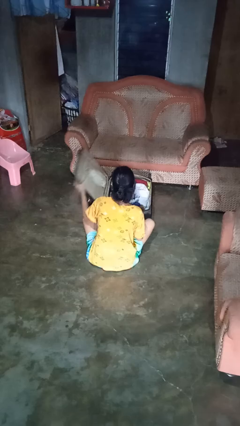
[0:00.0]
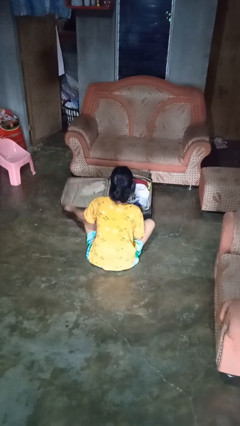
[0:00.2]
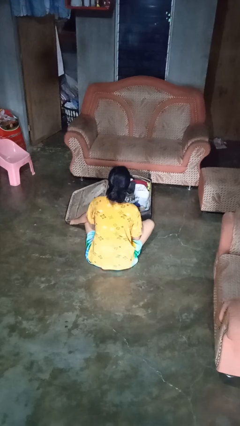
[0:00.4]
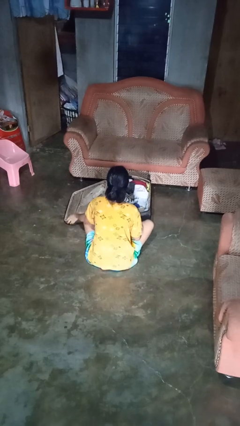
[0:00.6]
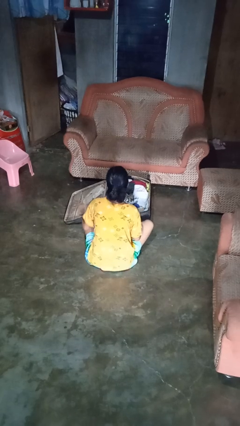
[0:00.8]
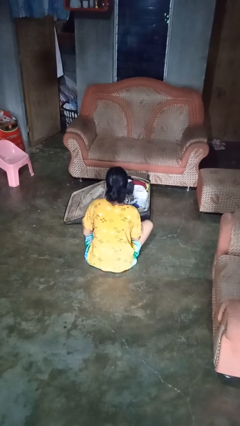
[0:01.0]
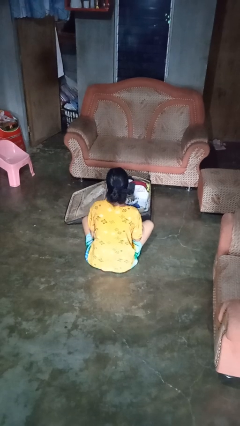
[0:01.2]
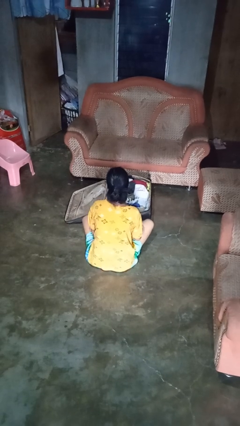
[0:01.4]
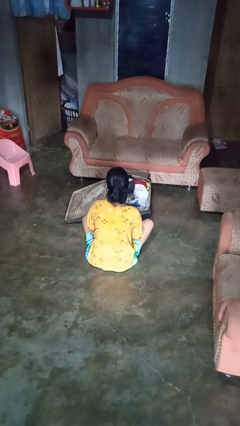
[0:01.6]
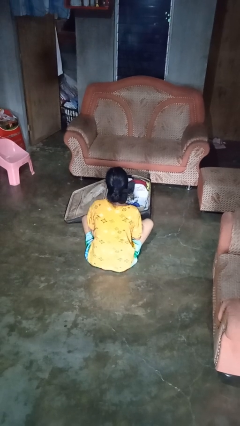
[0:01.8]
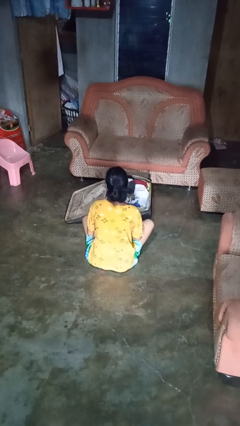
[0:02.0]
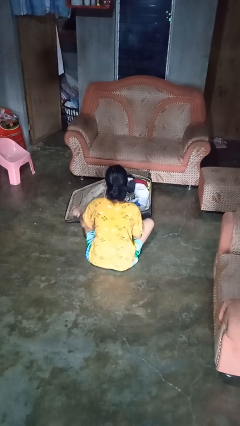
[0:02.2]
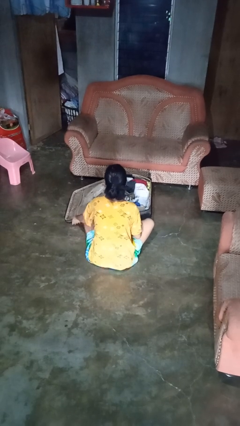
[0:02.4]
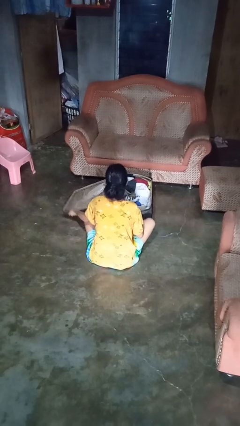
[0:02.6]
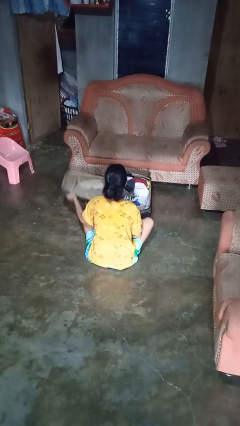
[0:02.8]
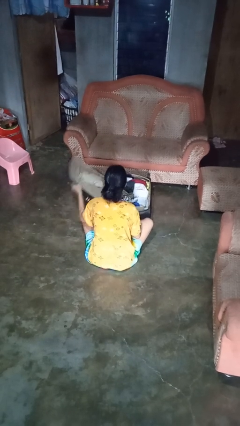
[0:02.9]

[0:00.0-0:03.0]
person opens suitcase

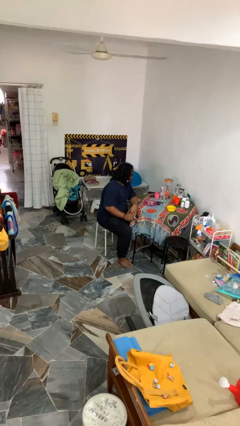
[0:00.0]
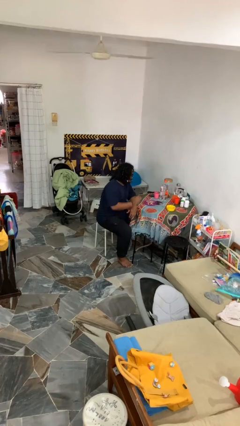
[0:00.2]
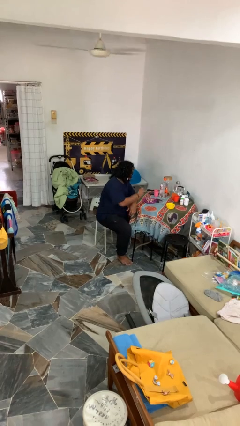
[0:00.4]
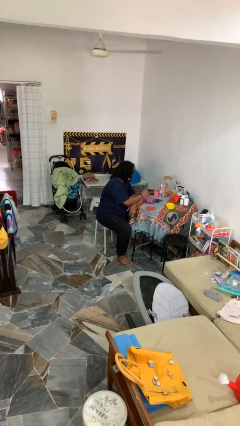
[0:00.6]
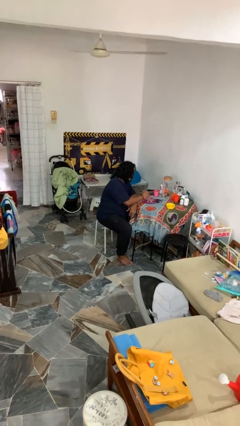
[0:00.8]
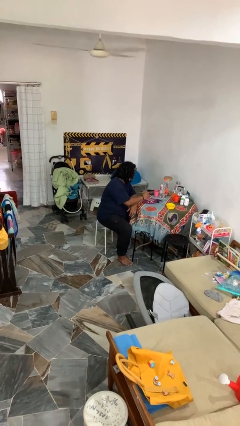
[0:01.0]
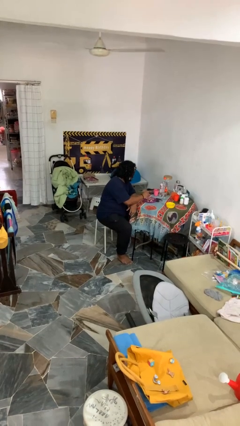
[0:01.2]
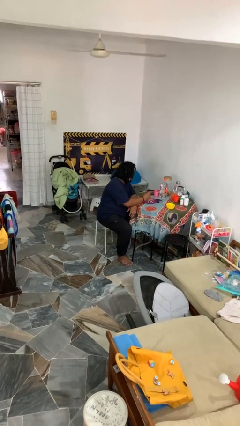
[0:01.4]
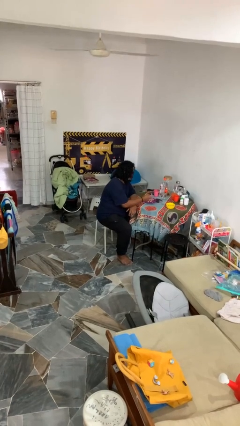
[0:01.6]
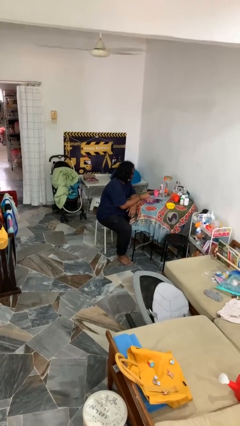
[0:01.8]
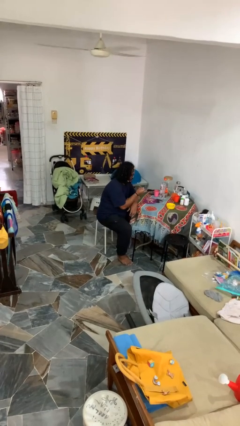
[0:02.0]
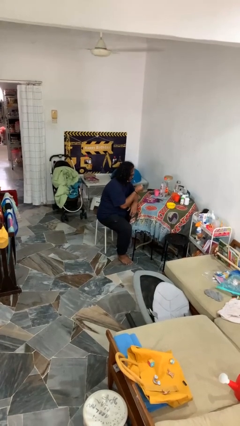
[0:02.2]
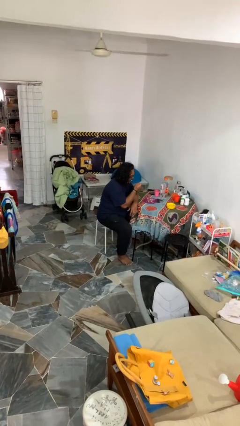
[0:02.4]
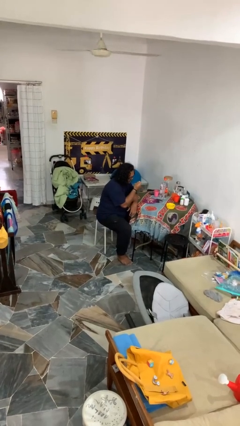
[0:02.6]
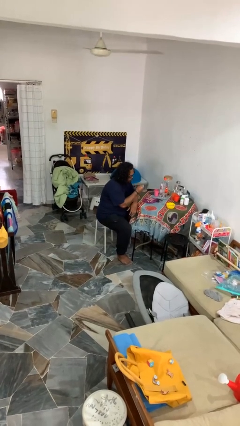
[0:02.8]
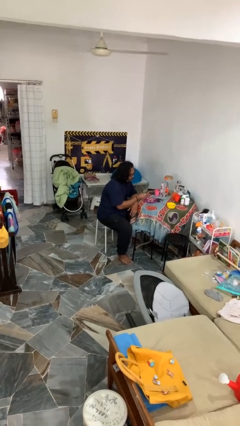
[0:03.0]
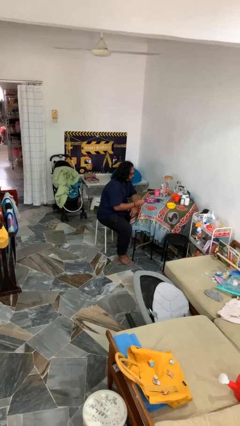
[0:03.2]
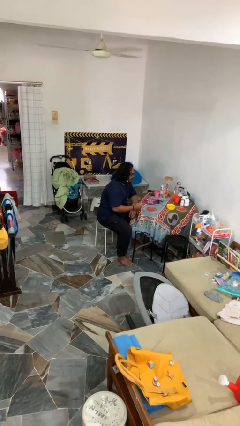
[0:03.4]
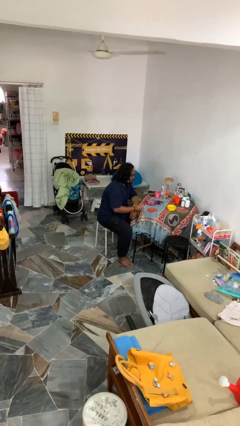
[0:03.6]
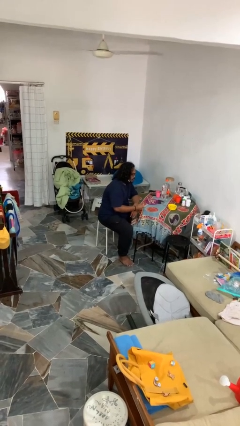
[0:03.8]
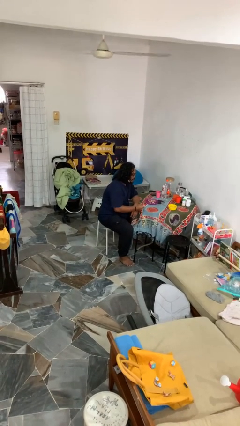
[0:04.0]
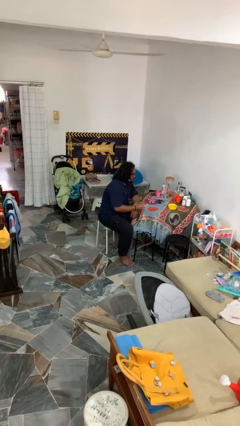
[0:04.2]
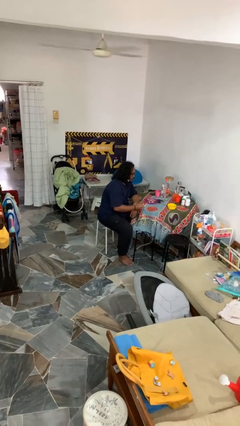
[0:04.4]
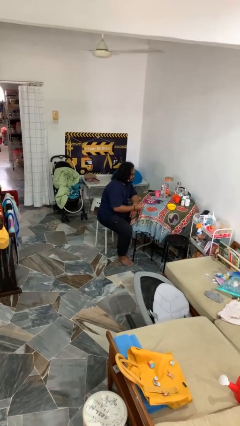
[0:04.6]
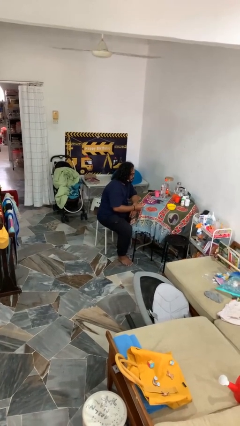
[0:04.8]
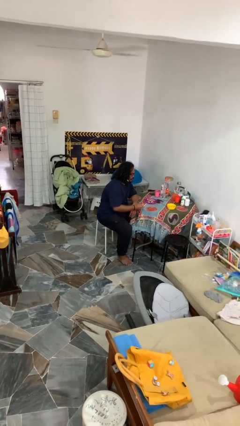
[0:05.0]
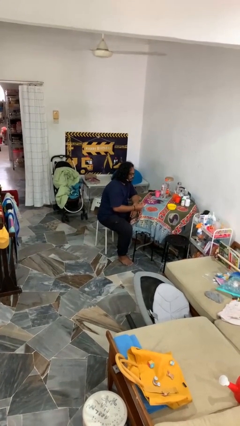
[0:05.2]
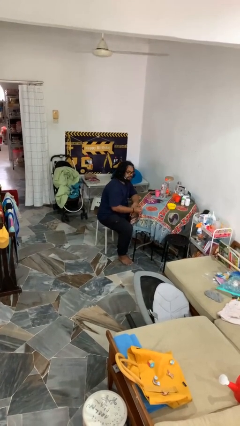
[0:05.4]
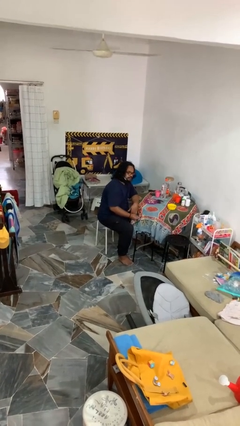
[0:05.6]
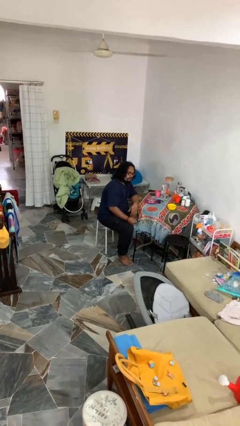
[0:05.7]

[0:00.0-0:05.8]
person eats with utensil

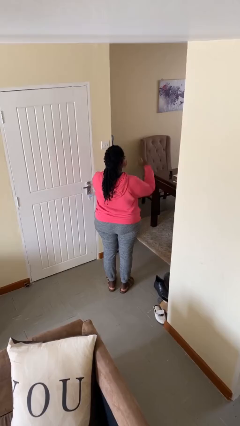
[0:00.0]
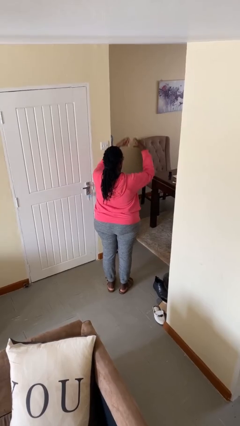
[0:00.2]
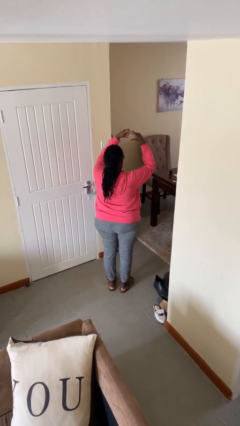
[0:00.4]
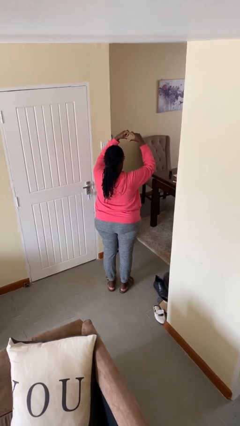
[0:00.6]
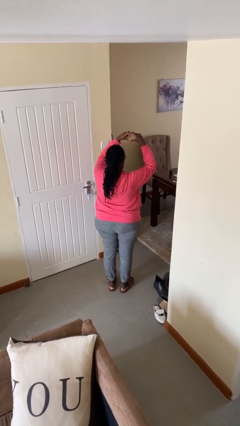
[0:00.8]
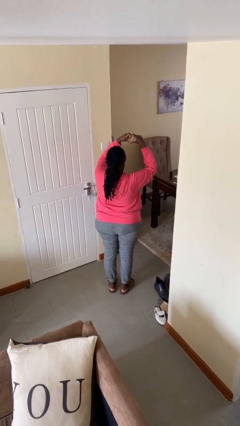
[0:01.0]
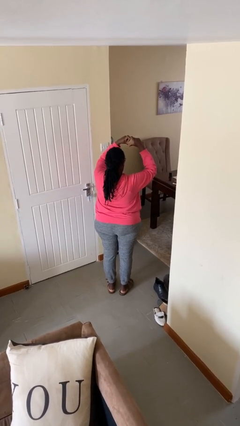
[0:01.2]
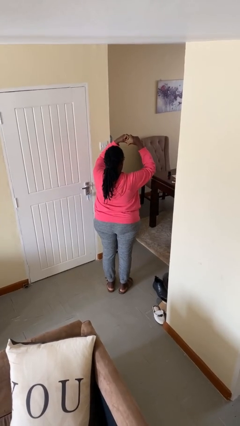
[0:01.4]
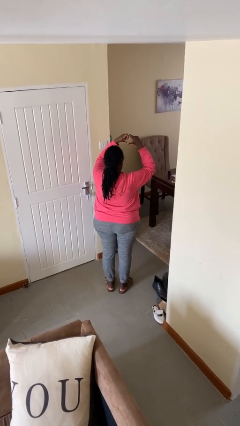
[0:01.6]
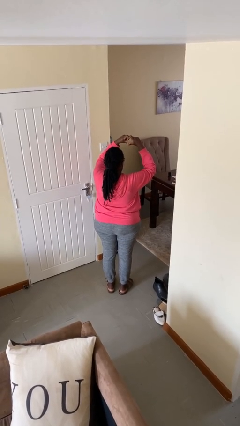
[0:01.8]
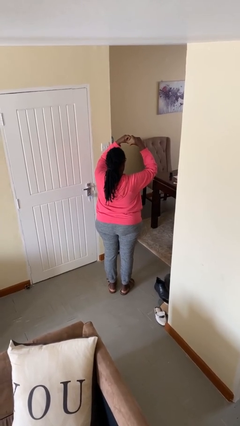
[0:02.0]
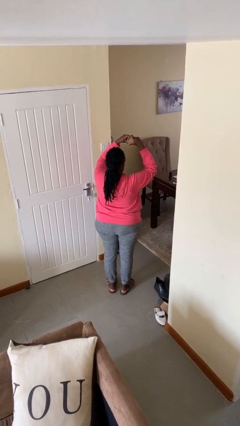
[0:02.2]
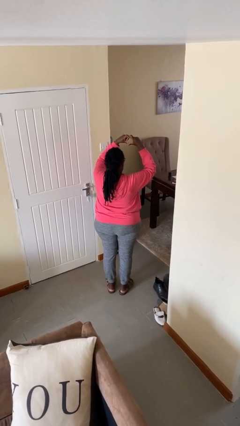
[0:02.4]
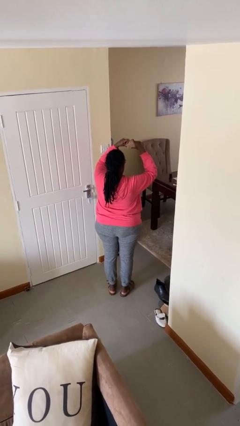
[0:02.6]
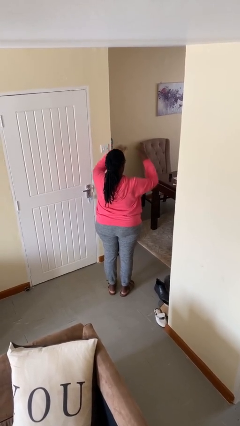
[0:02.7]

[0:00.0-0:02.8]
person gestures heart

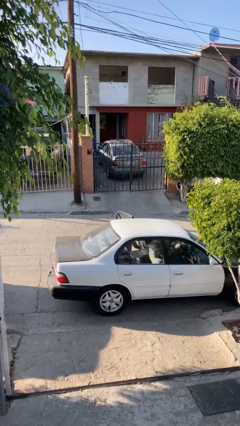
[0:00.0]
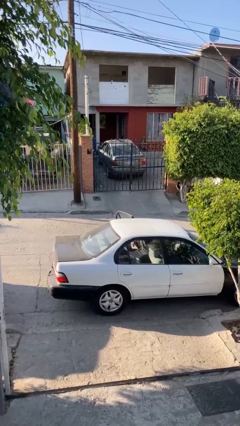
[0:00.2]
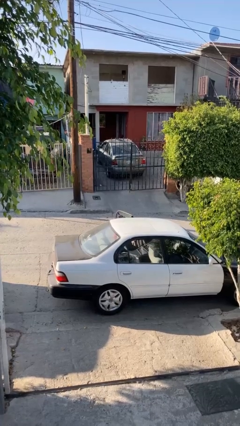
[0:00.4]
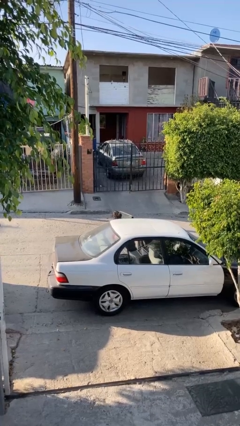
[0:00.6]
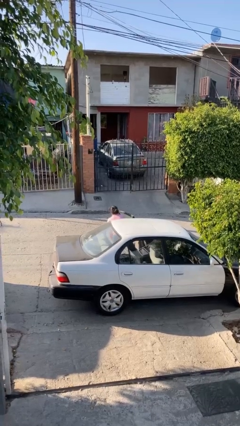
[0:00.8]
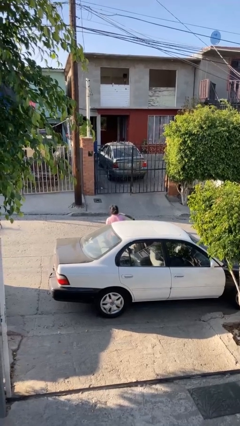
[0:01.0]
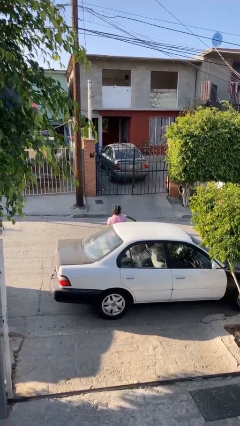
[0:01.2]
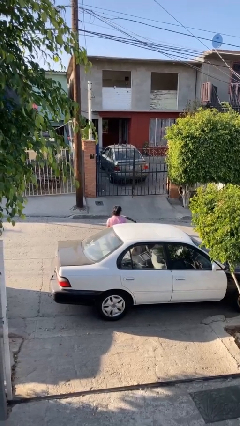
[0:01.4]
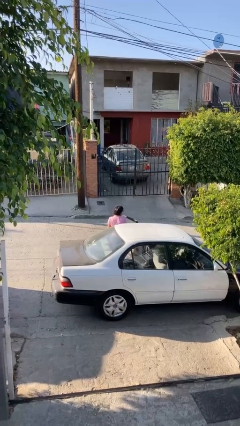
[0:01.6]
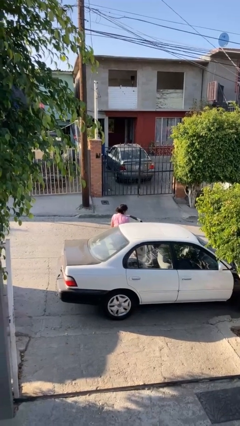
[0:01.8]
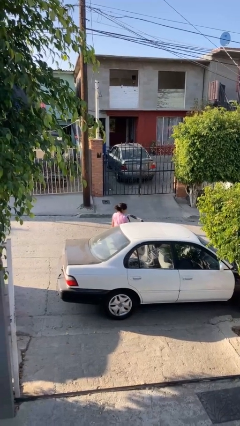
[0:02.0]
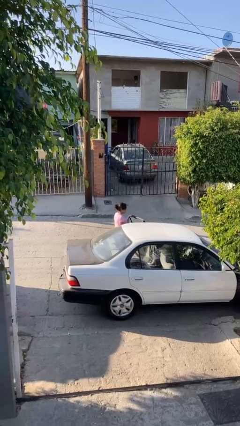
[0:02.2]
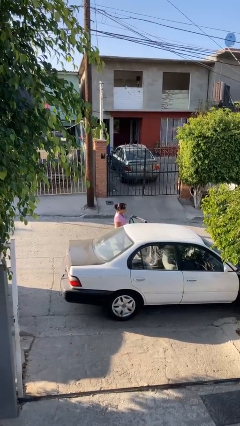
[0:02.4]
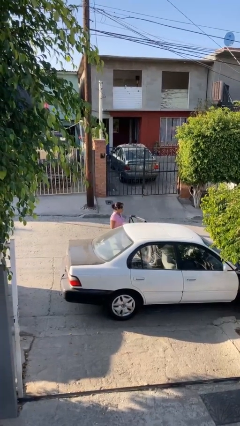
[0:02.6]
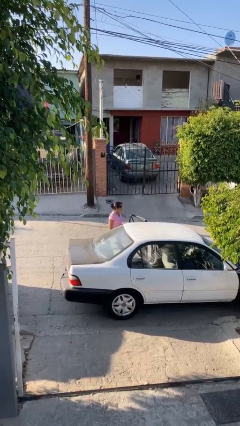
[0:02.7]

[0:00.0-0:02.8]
person exits car

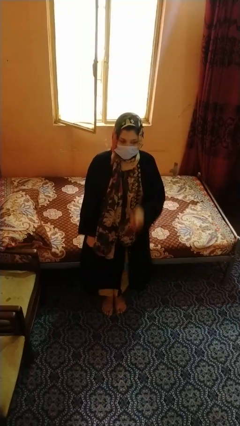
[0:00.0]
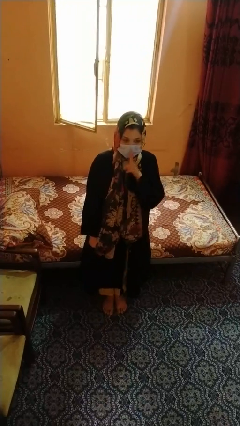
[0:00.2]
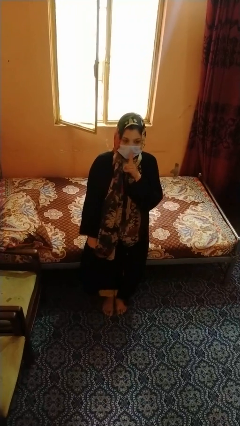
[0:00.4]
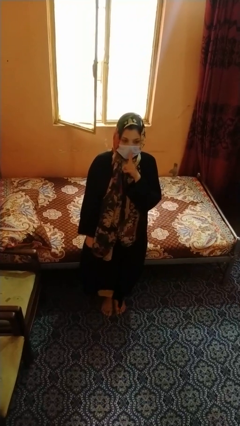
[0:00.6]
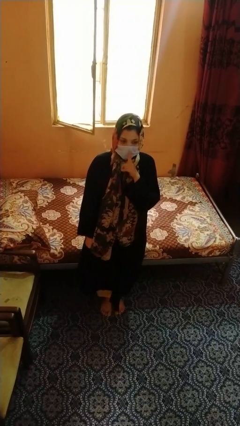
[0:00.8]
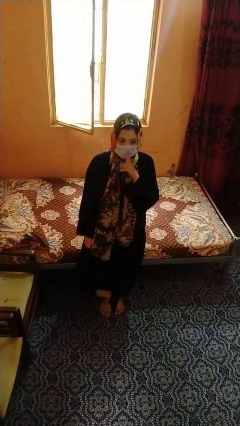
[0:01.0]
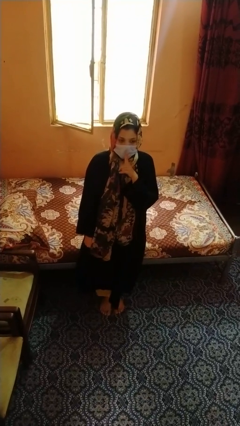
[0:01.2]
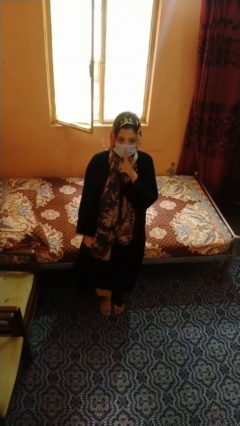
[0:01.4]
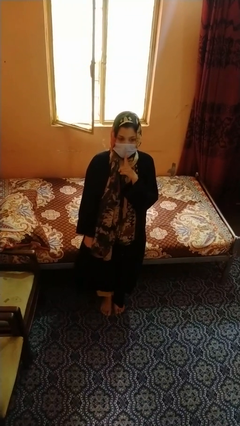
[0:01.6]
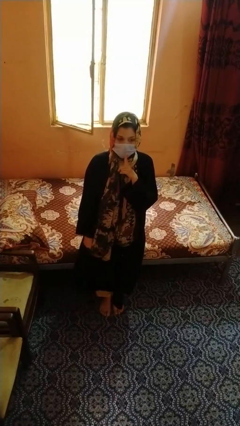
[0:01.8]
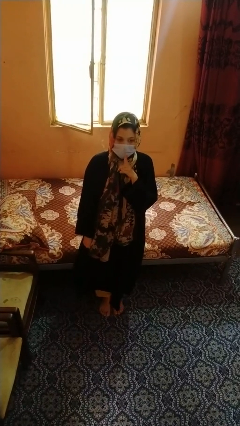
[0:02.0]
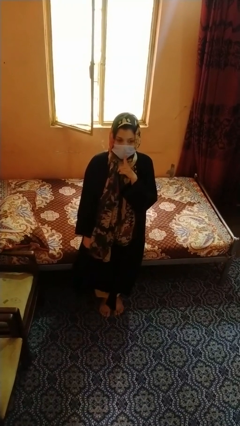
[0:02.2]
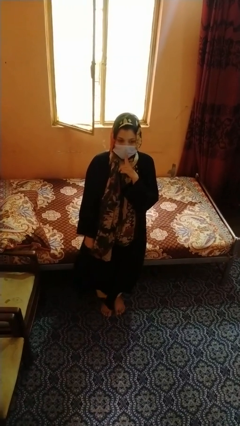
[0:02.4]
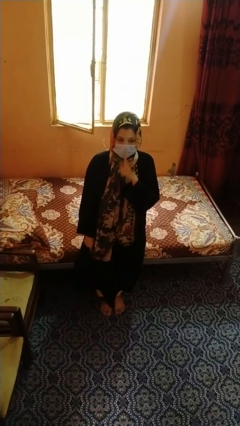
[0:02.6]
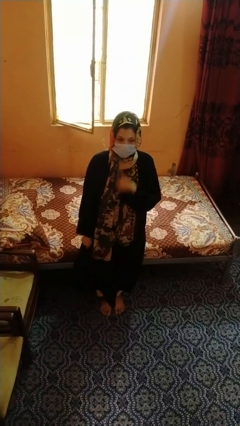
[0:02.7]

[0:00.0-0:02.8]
person gestures be quiet

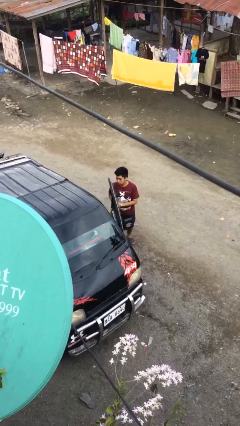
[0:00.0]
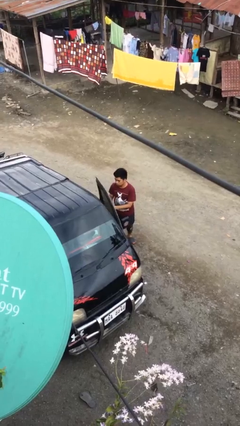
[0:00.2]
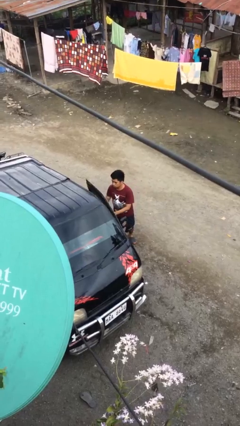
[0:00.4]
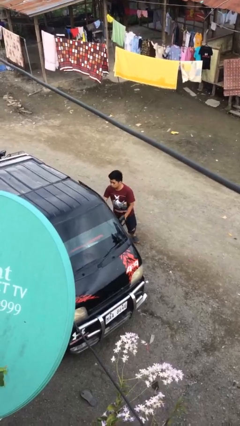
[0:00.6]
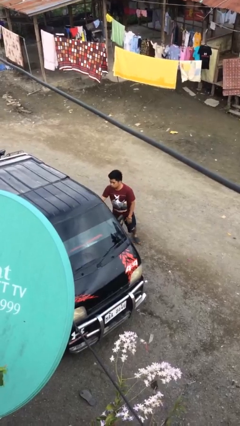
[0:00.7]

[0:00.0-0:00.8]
person closes car door
